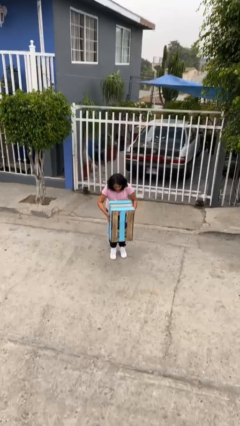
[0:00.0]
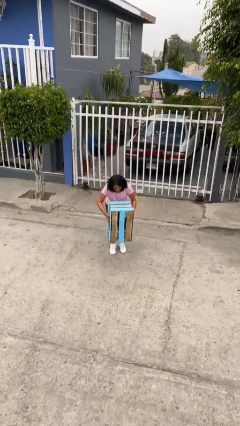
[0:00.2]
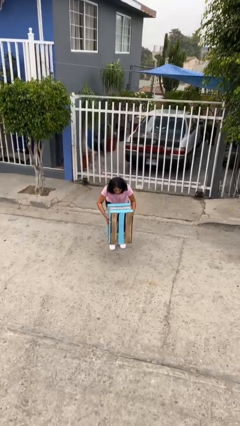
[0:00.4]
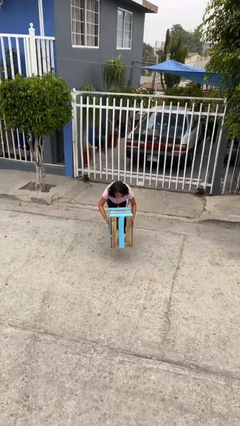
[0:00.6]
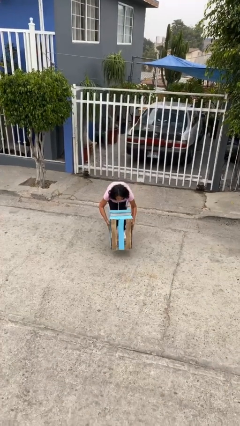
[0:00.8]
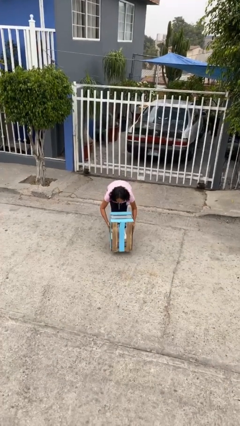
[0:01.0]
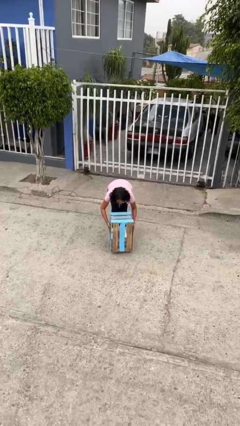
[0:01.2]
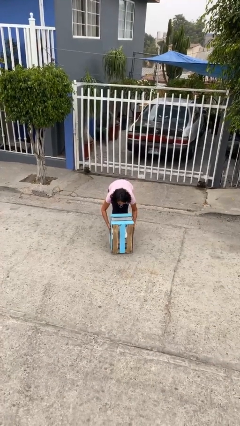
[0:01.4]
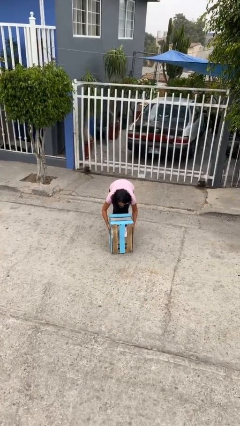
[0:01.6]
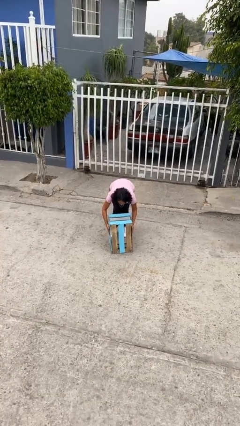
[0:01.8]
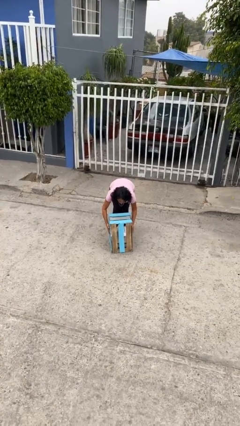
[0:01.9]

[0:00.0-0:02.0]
person puts down object on floor

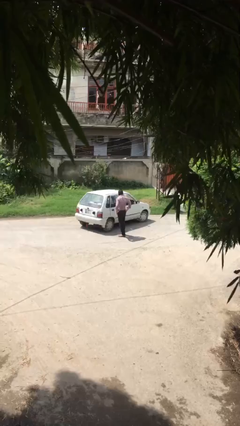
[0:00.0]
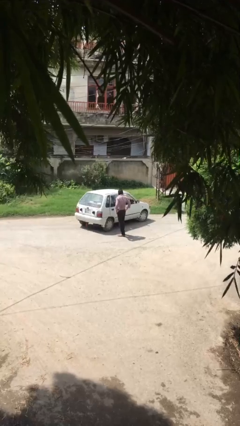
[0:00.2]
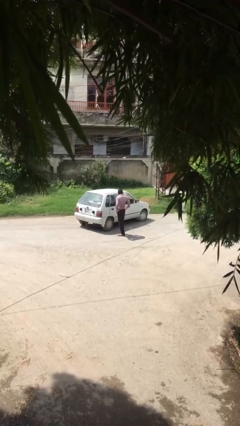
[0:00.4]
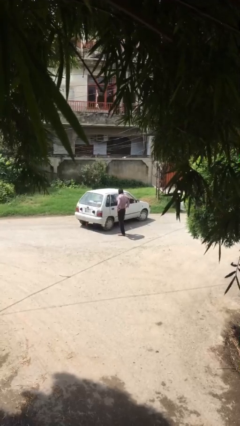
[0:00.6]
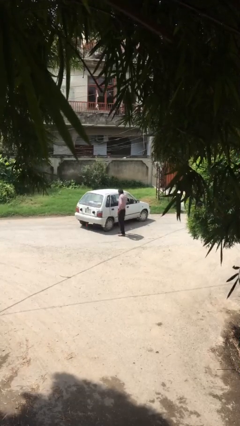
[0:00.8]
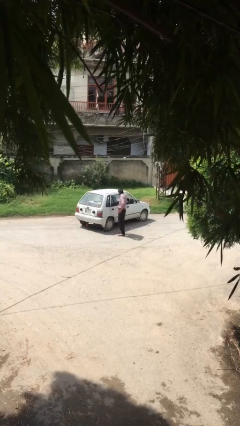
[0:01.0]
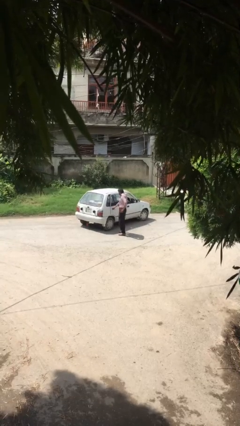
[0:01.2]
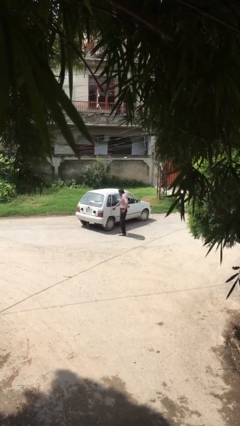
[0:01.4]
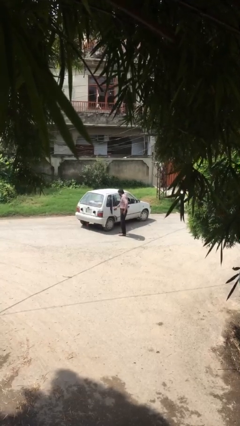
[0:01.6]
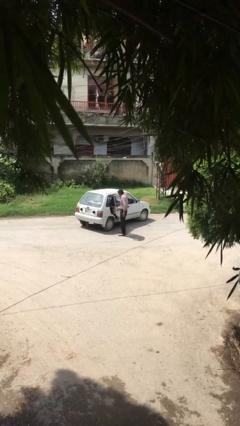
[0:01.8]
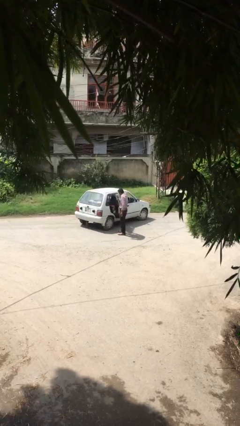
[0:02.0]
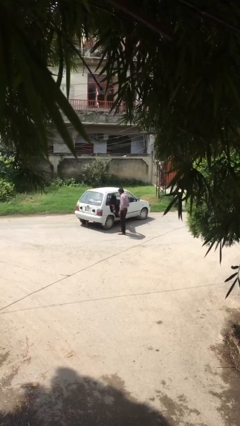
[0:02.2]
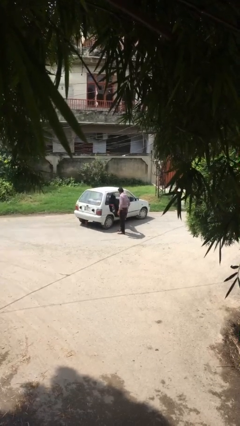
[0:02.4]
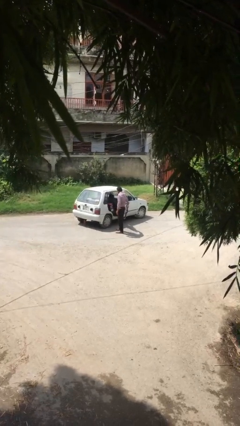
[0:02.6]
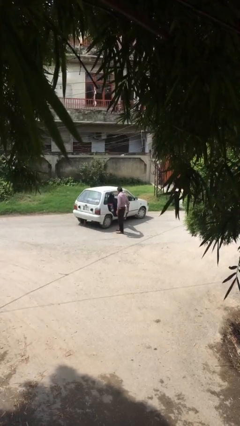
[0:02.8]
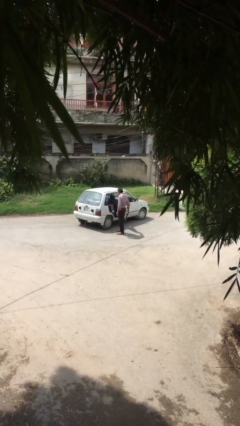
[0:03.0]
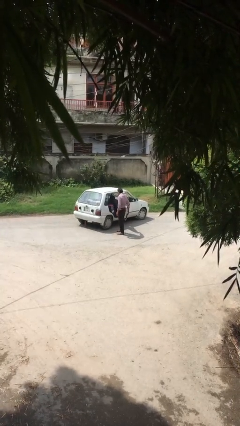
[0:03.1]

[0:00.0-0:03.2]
person opens car door

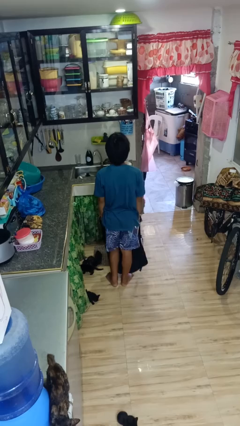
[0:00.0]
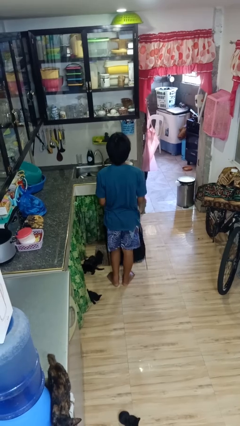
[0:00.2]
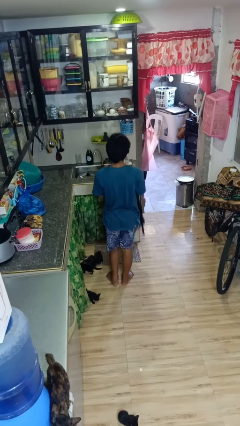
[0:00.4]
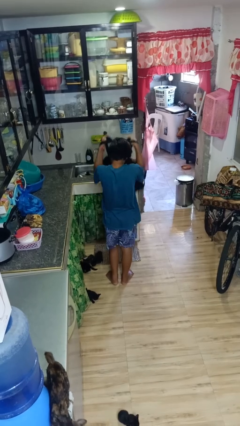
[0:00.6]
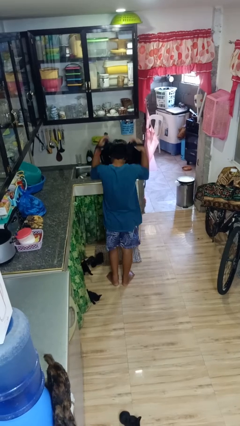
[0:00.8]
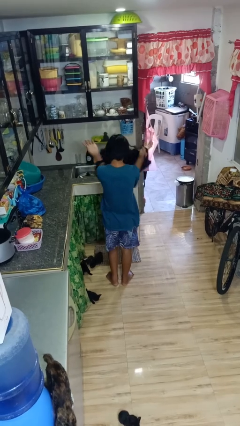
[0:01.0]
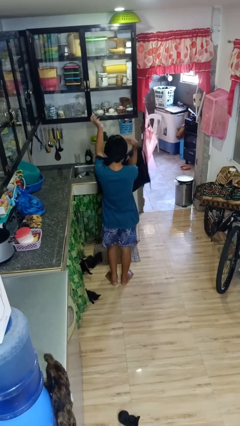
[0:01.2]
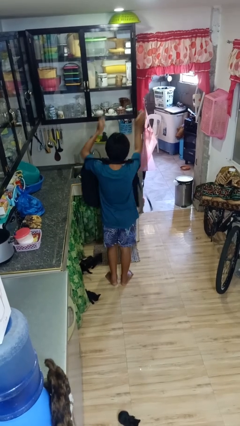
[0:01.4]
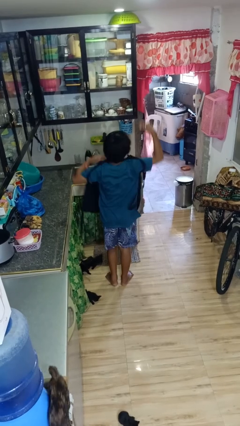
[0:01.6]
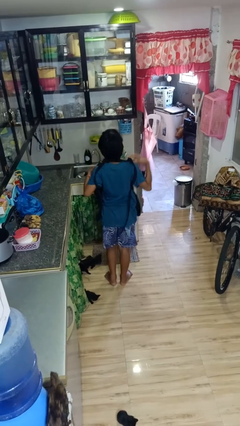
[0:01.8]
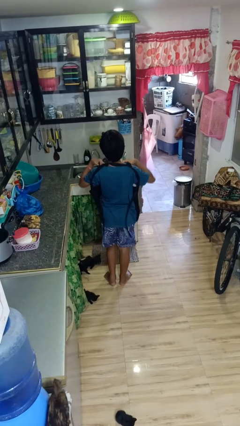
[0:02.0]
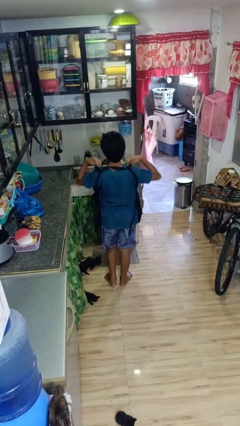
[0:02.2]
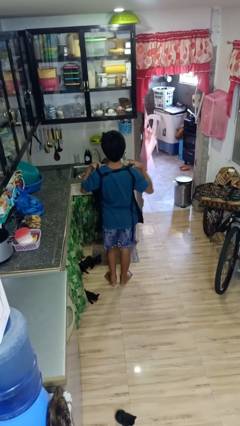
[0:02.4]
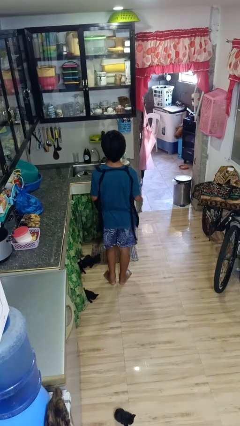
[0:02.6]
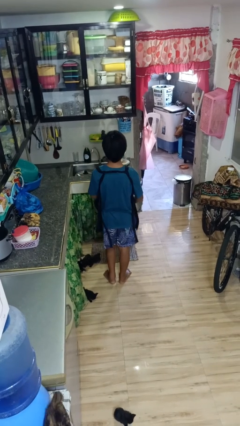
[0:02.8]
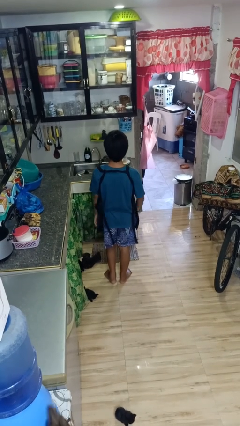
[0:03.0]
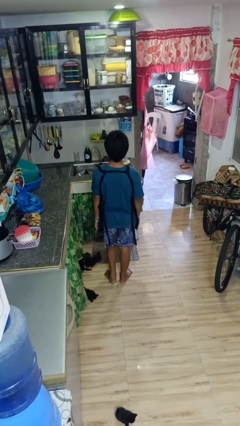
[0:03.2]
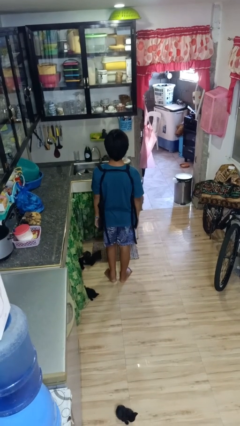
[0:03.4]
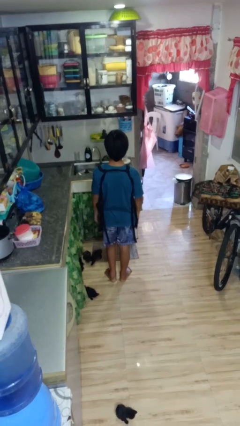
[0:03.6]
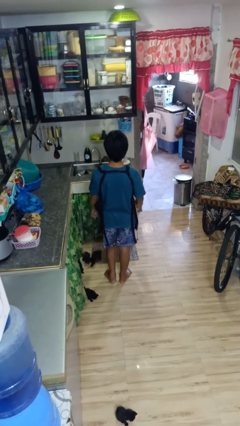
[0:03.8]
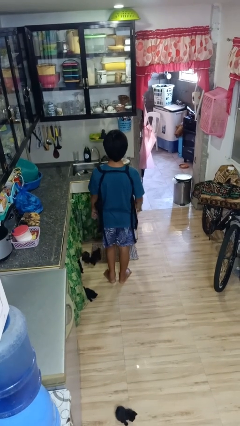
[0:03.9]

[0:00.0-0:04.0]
person puts on apron

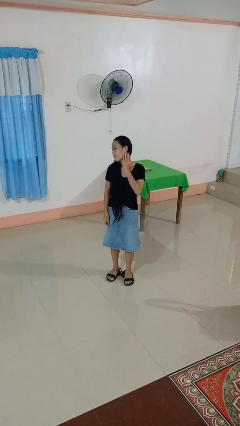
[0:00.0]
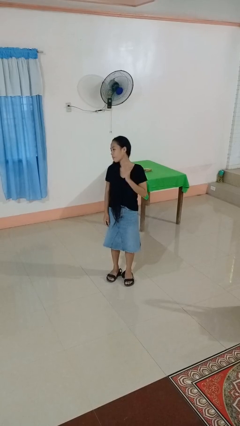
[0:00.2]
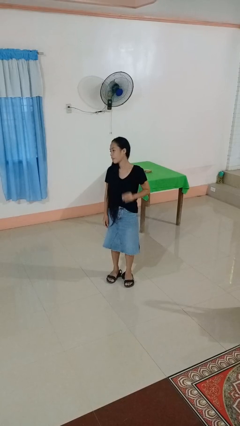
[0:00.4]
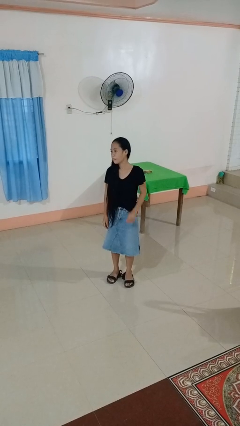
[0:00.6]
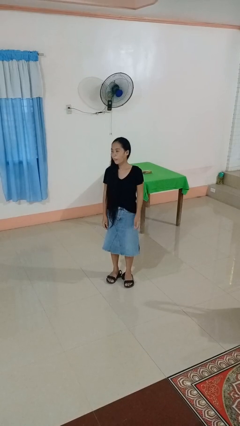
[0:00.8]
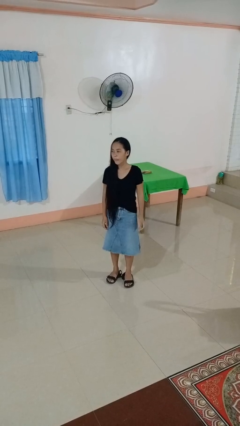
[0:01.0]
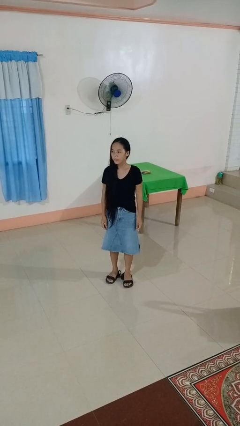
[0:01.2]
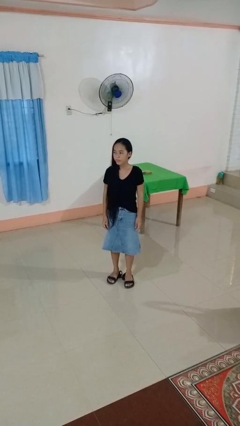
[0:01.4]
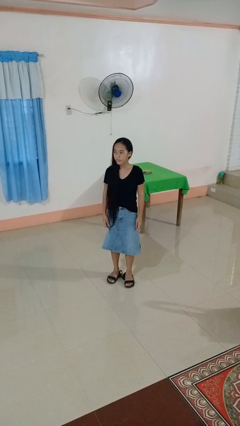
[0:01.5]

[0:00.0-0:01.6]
person swats bug

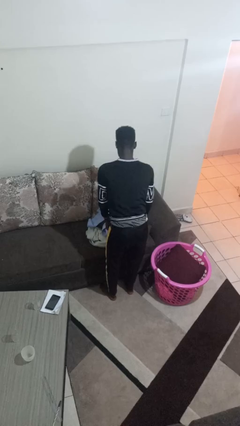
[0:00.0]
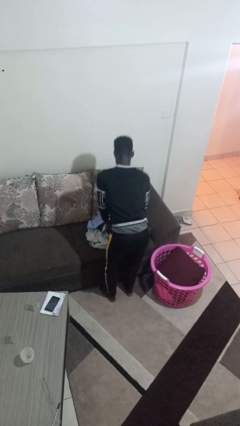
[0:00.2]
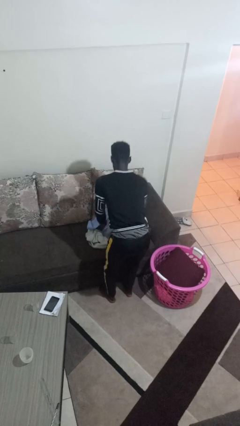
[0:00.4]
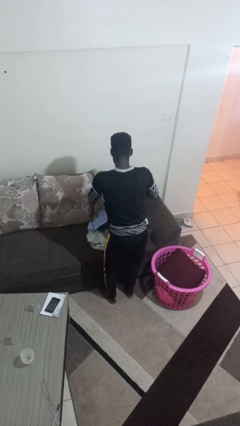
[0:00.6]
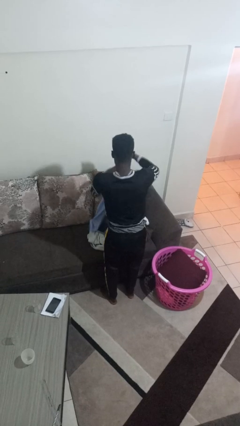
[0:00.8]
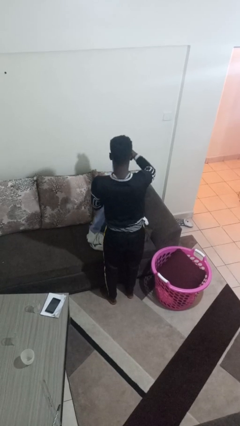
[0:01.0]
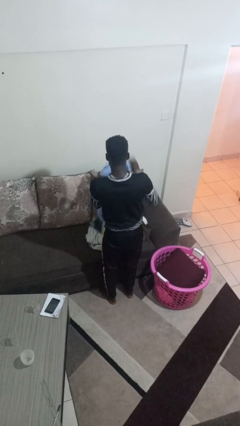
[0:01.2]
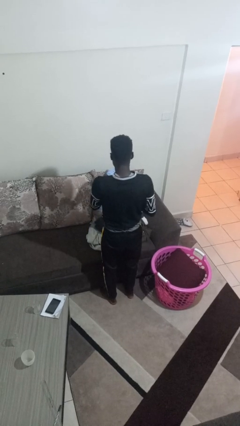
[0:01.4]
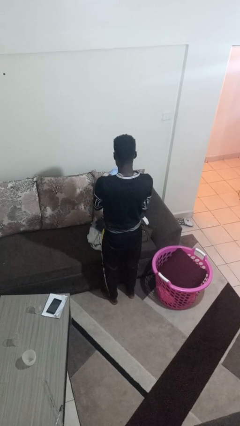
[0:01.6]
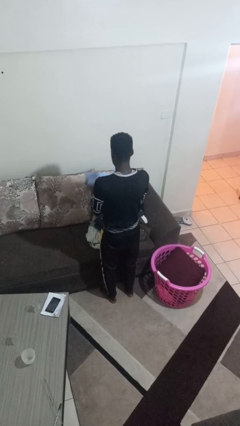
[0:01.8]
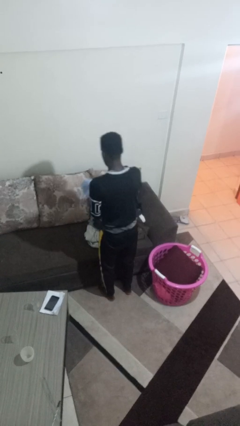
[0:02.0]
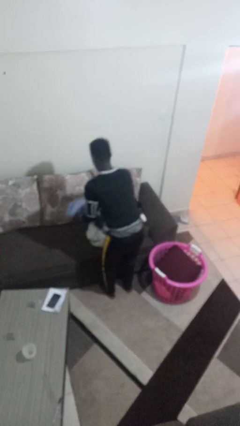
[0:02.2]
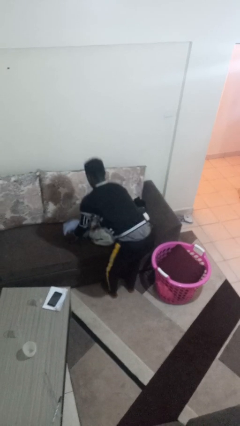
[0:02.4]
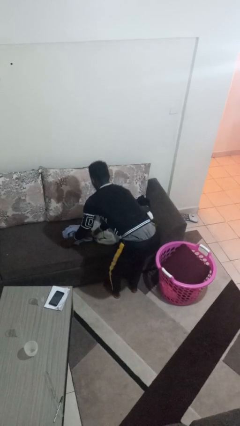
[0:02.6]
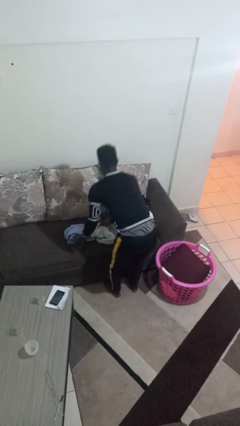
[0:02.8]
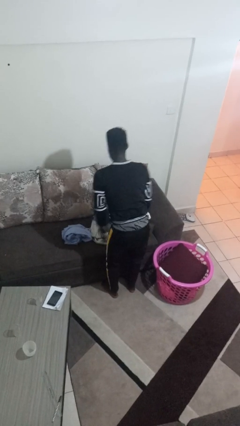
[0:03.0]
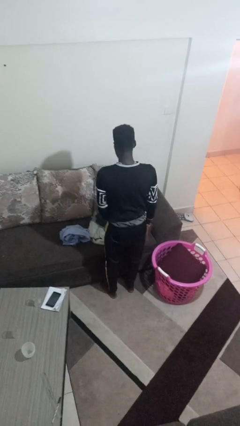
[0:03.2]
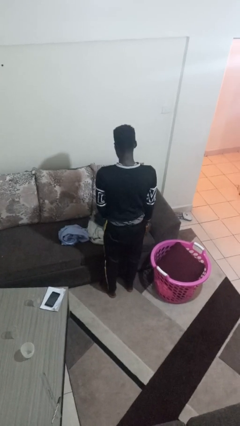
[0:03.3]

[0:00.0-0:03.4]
person folds shirt

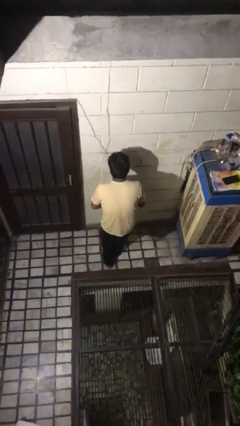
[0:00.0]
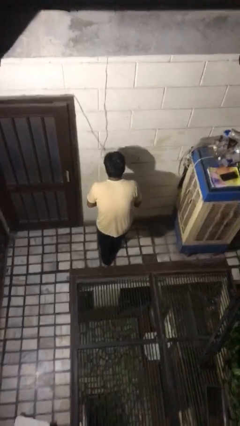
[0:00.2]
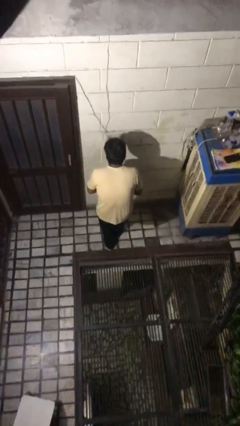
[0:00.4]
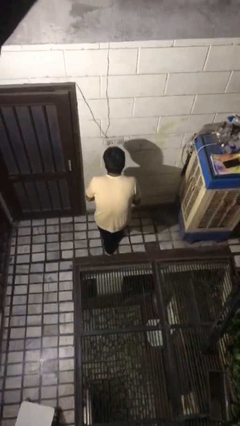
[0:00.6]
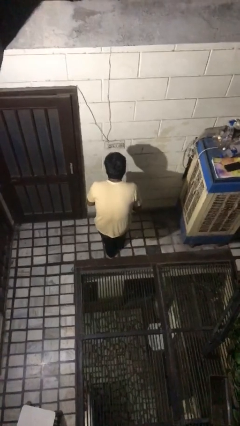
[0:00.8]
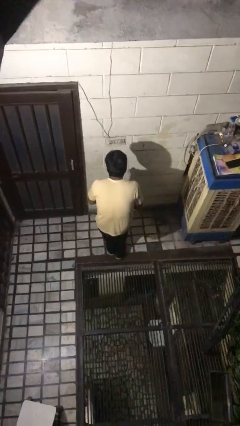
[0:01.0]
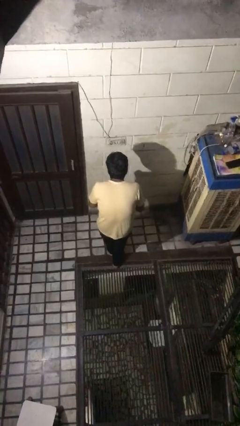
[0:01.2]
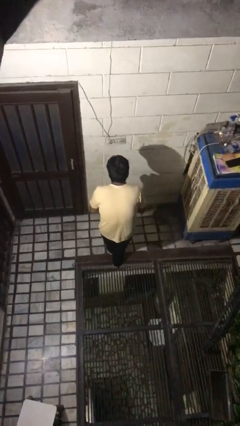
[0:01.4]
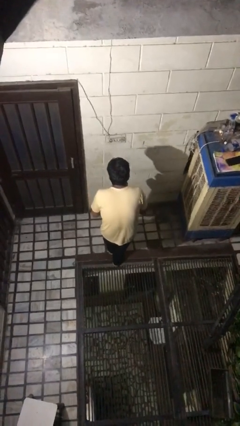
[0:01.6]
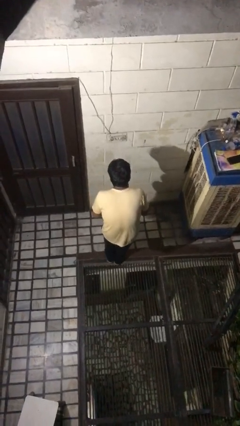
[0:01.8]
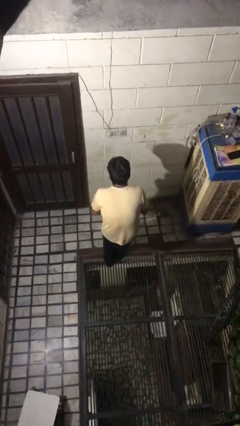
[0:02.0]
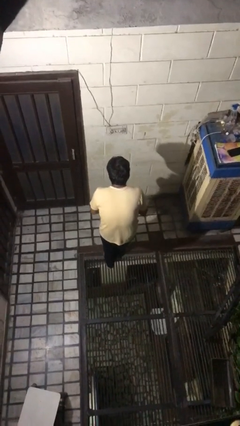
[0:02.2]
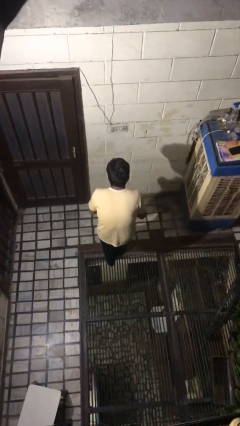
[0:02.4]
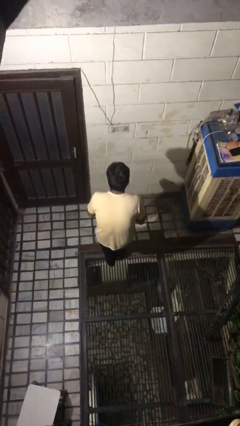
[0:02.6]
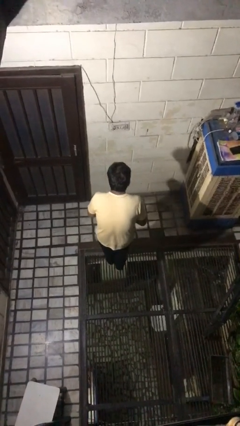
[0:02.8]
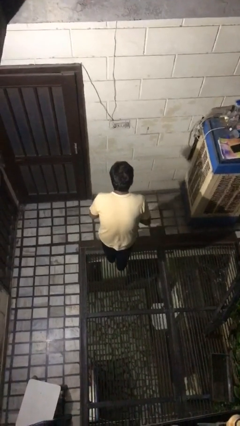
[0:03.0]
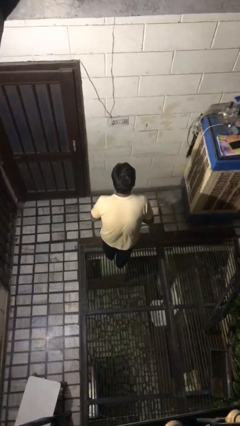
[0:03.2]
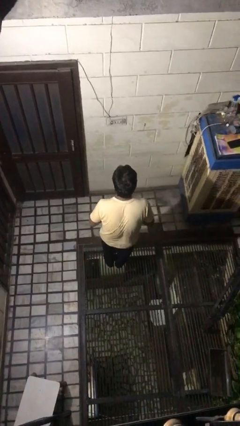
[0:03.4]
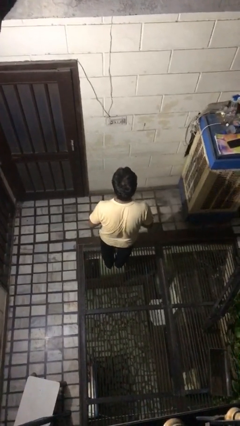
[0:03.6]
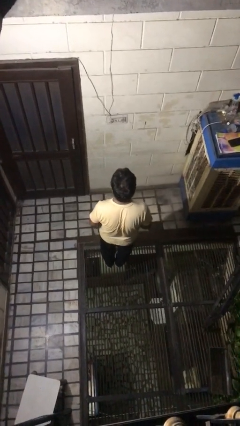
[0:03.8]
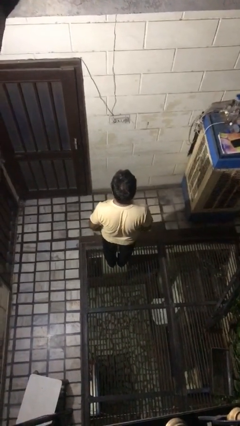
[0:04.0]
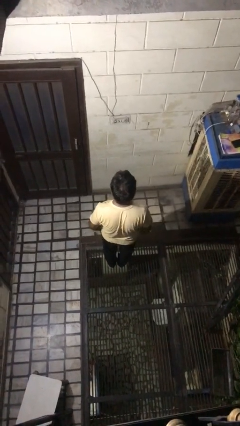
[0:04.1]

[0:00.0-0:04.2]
person walks tiptoe
